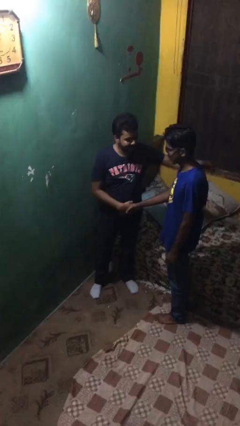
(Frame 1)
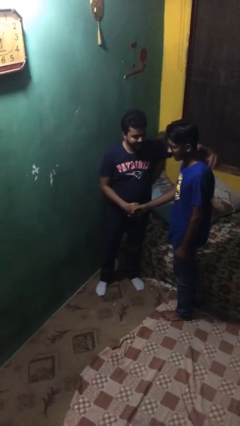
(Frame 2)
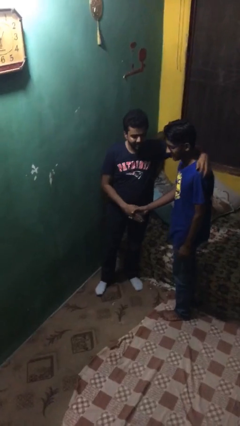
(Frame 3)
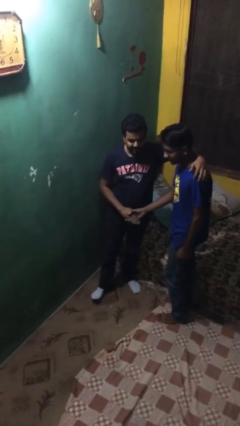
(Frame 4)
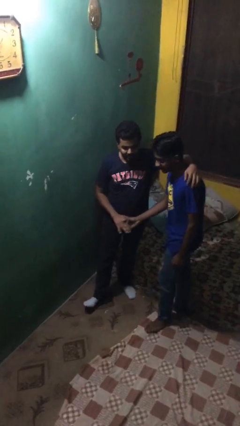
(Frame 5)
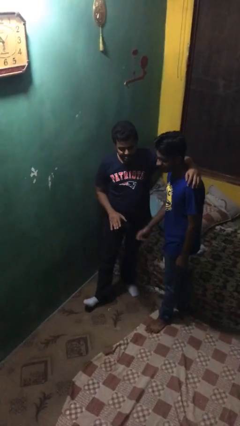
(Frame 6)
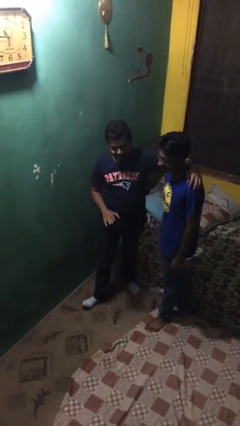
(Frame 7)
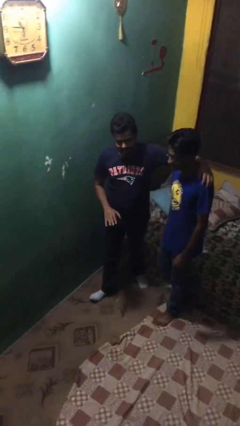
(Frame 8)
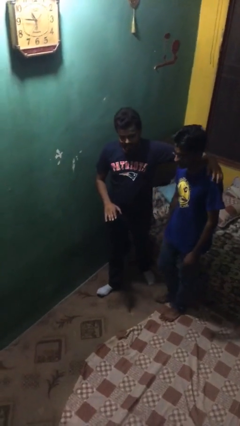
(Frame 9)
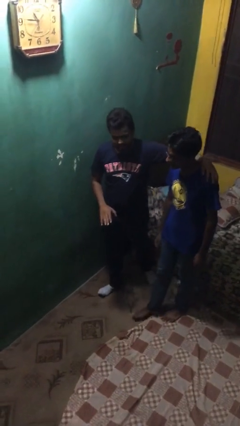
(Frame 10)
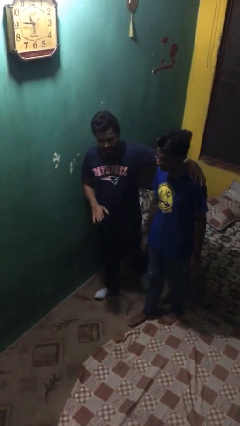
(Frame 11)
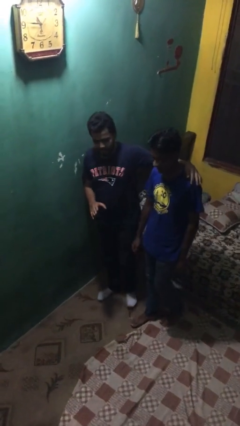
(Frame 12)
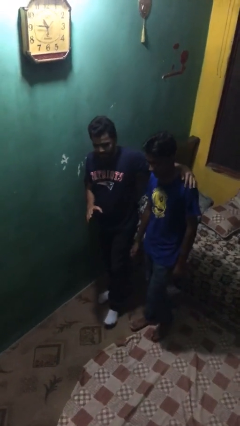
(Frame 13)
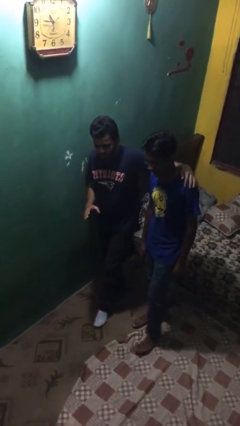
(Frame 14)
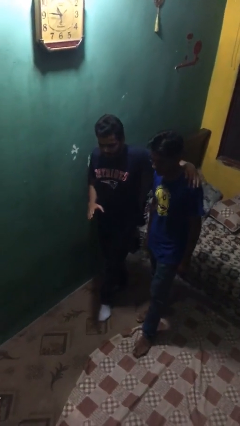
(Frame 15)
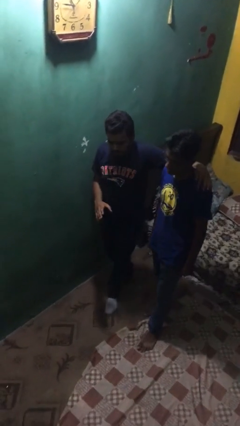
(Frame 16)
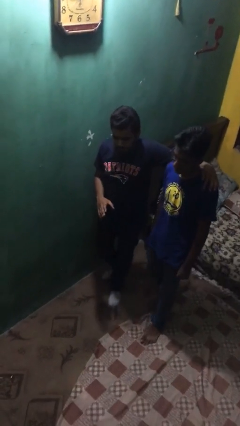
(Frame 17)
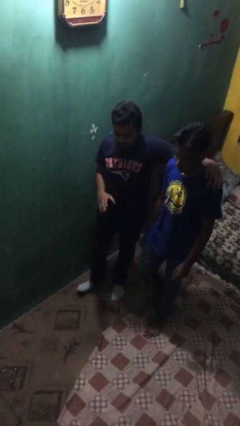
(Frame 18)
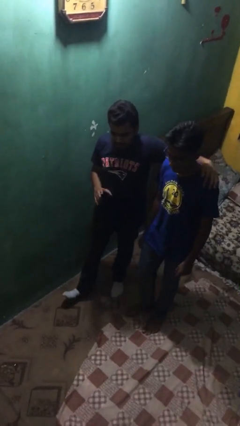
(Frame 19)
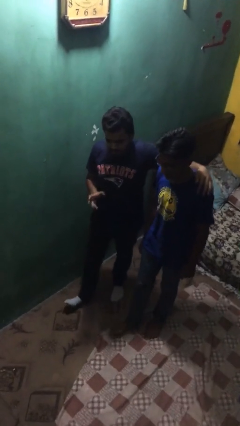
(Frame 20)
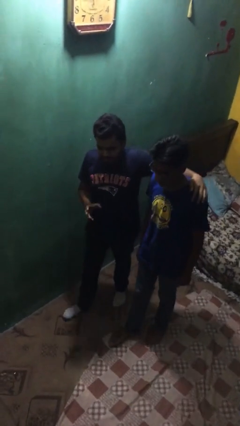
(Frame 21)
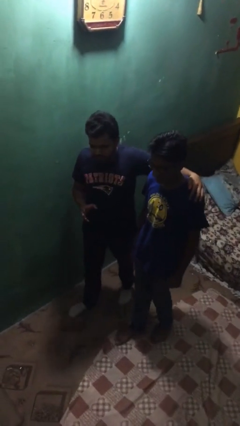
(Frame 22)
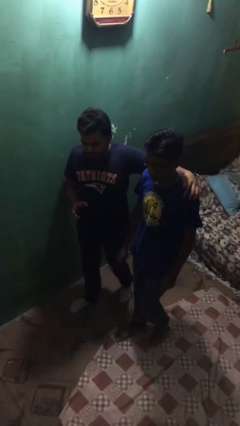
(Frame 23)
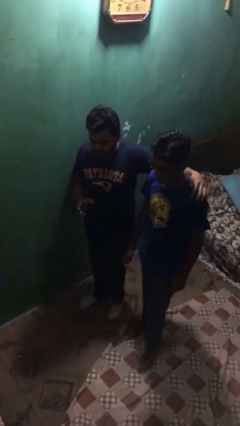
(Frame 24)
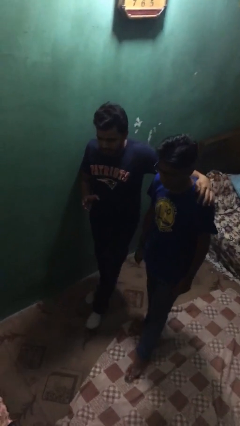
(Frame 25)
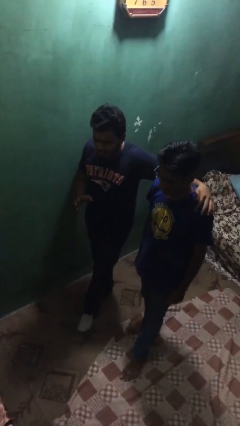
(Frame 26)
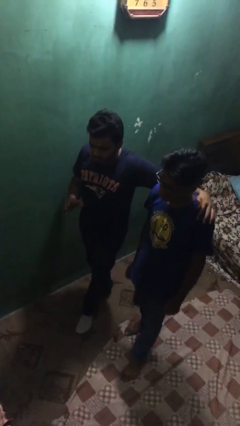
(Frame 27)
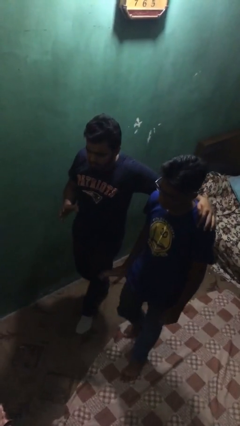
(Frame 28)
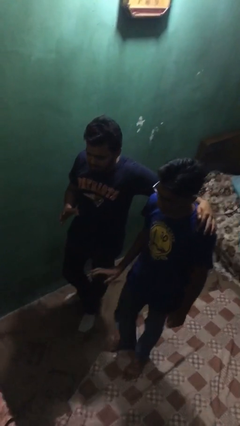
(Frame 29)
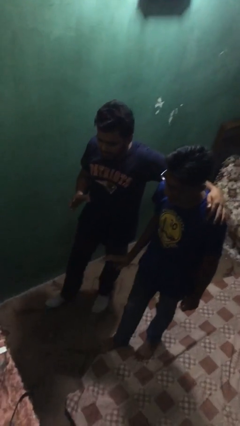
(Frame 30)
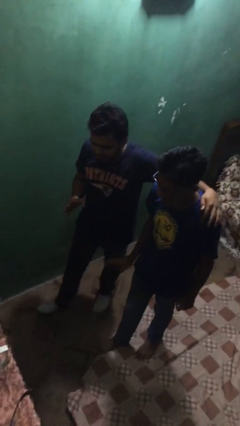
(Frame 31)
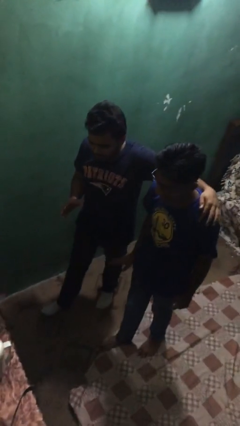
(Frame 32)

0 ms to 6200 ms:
person talks to person

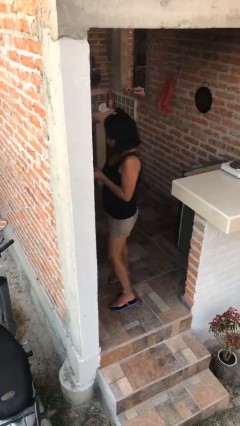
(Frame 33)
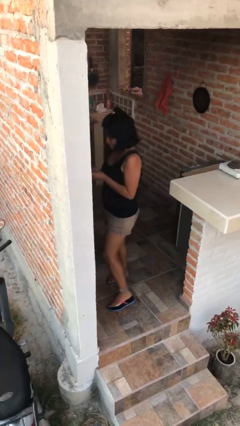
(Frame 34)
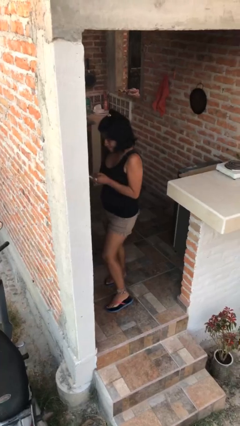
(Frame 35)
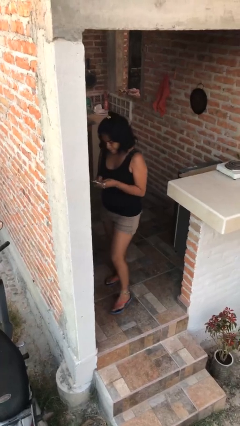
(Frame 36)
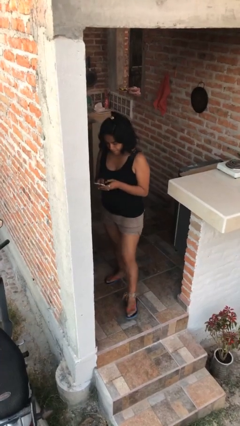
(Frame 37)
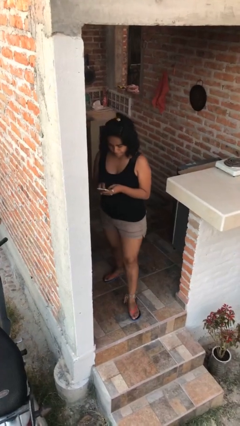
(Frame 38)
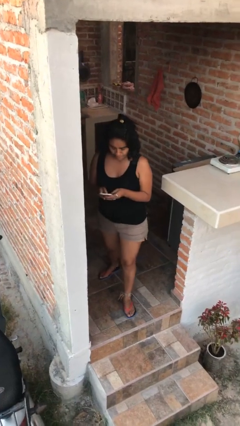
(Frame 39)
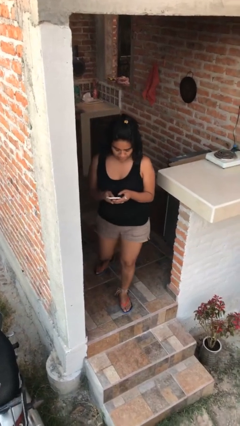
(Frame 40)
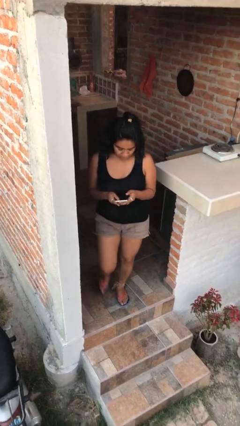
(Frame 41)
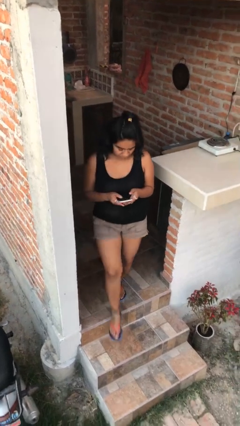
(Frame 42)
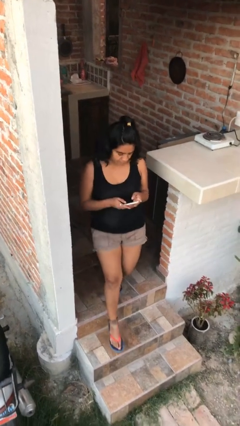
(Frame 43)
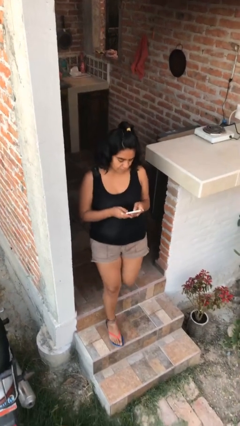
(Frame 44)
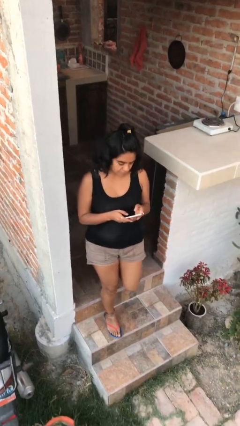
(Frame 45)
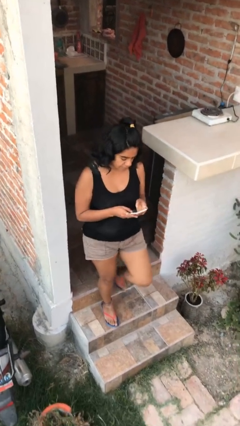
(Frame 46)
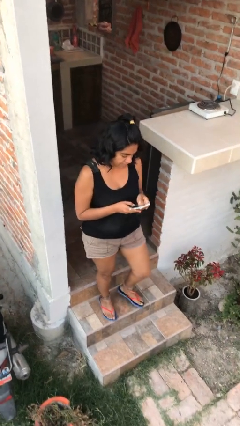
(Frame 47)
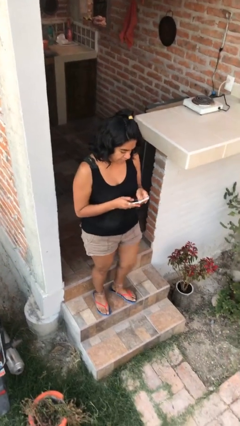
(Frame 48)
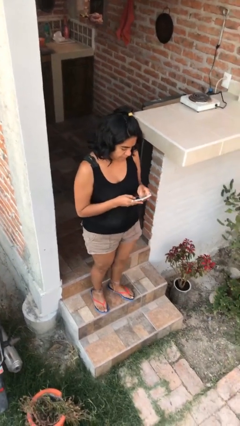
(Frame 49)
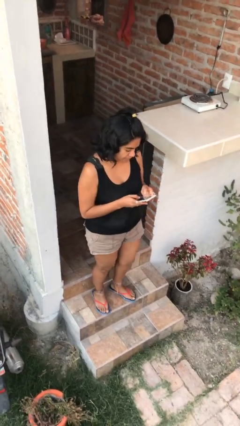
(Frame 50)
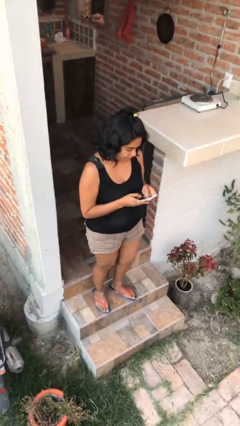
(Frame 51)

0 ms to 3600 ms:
person enters scene through structure

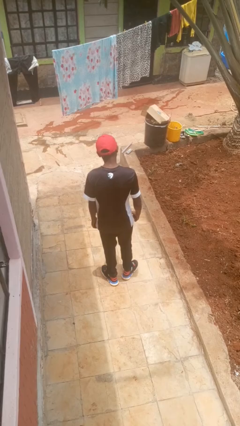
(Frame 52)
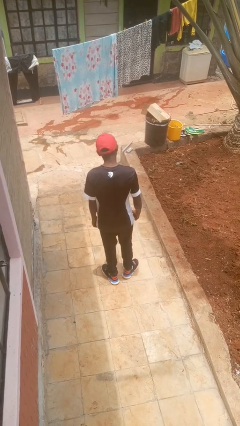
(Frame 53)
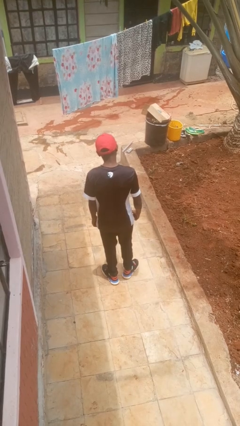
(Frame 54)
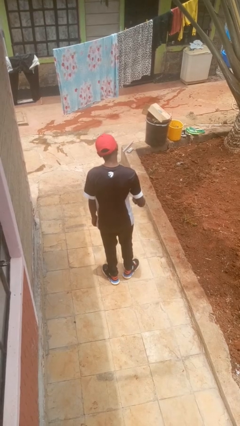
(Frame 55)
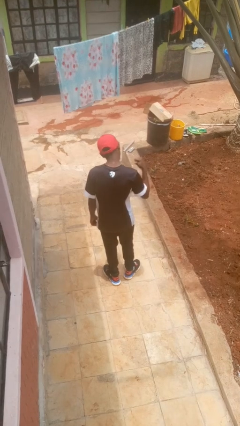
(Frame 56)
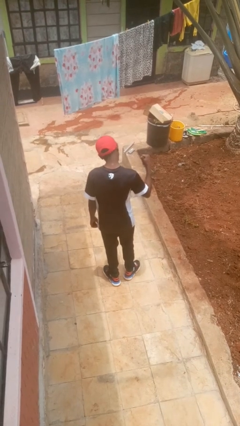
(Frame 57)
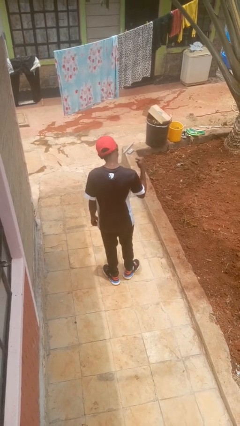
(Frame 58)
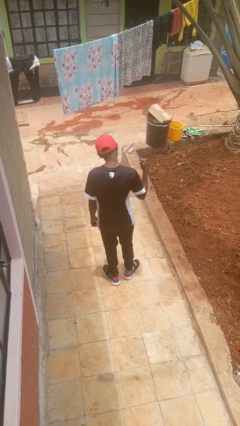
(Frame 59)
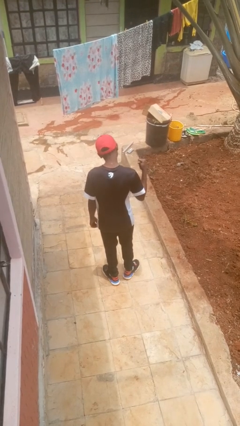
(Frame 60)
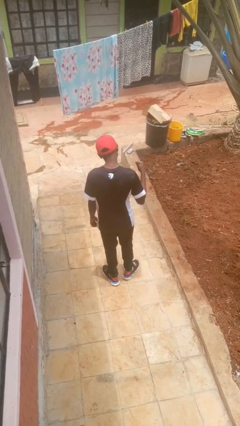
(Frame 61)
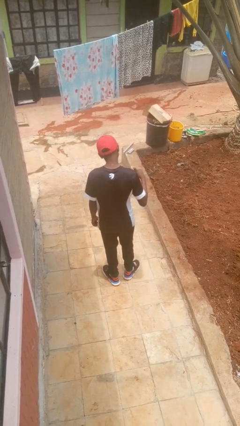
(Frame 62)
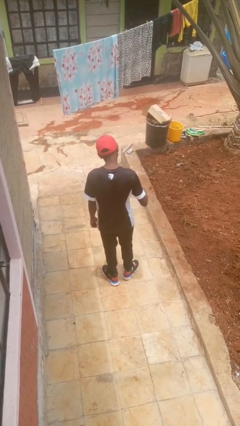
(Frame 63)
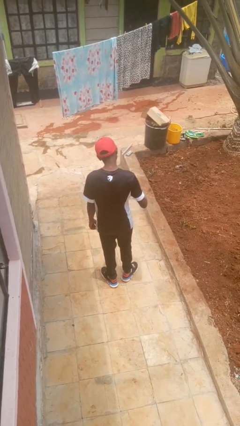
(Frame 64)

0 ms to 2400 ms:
person gestures behind me

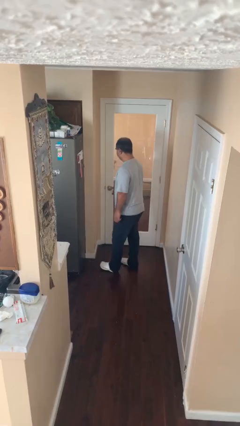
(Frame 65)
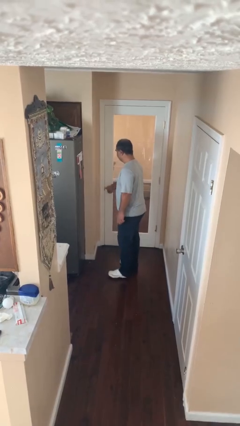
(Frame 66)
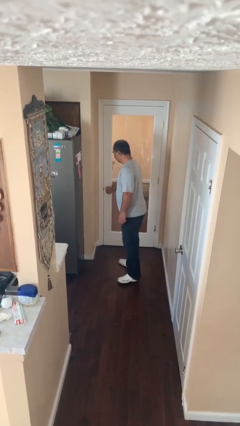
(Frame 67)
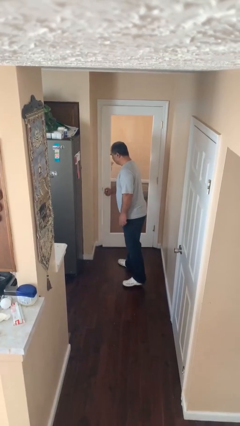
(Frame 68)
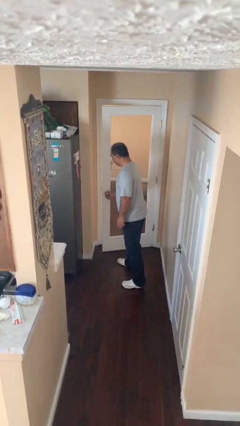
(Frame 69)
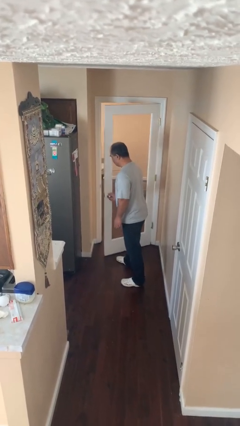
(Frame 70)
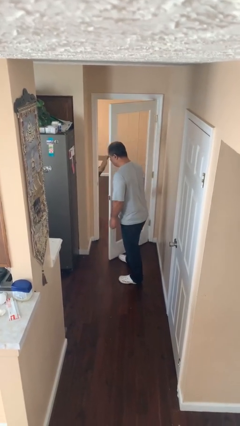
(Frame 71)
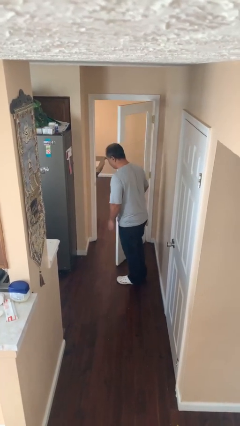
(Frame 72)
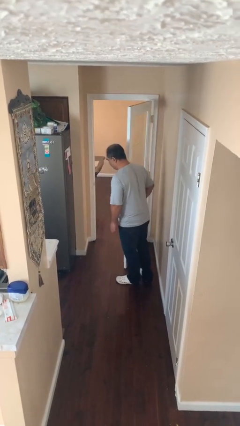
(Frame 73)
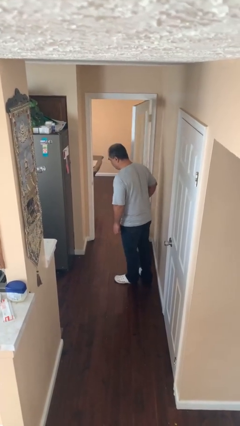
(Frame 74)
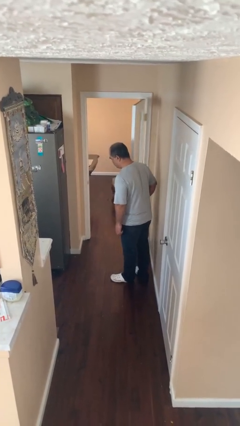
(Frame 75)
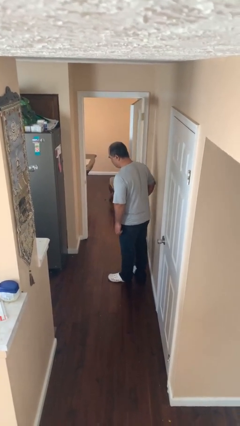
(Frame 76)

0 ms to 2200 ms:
person opens facility door

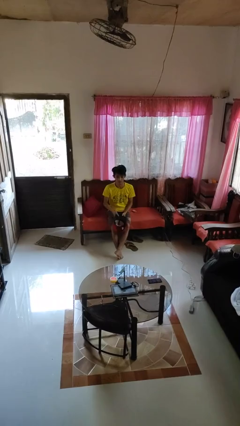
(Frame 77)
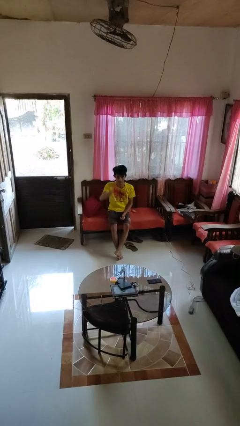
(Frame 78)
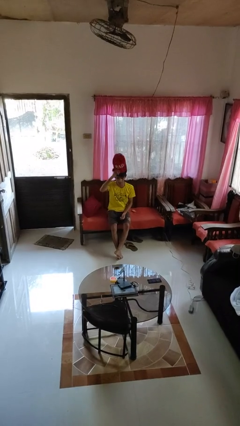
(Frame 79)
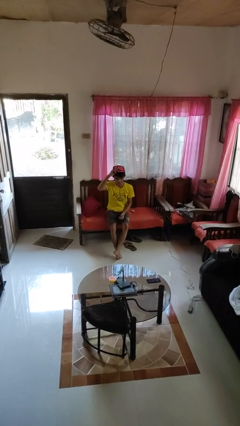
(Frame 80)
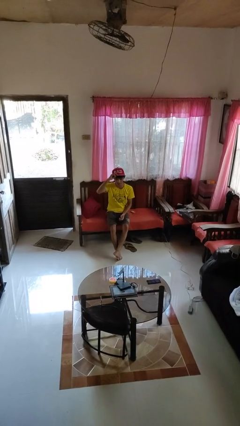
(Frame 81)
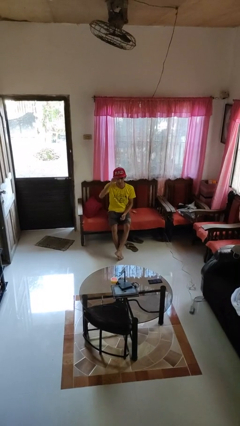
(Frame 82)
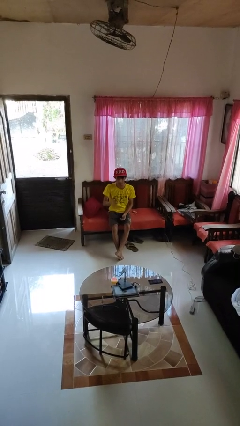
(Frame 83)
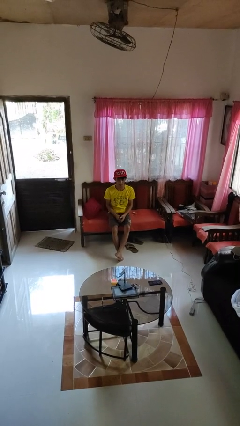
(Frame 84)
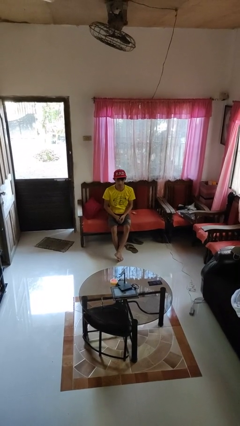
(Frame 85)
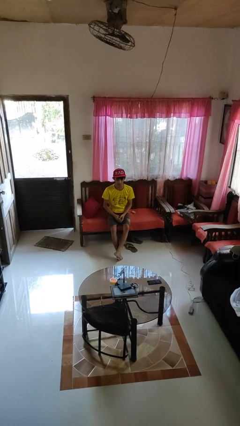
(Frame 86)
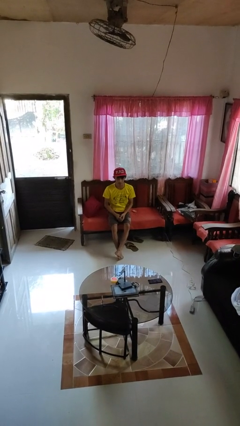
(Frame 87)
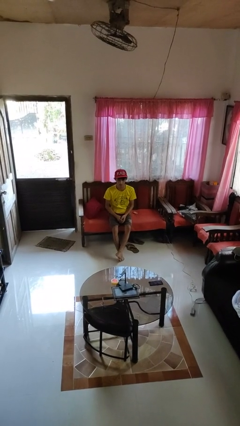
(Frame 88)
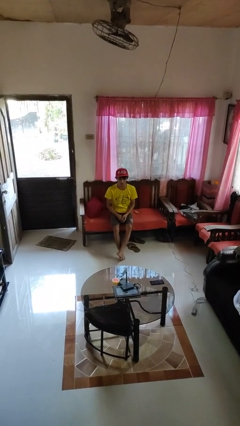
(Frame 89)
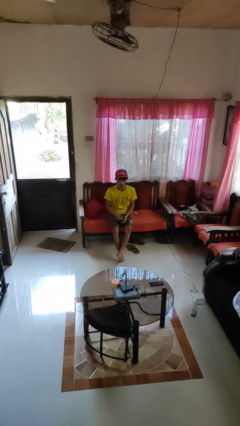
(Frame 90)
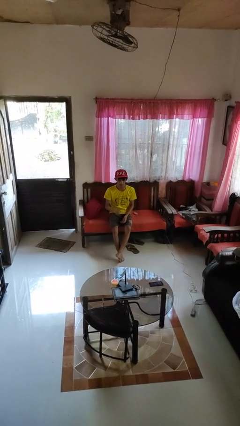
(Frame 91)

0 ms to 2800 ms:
person puts on hat
